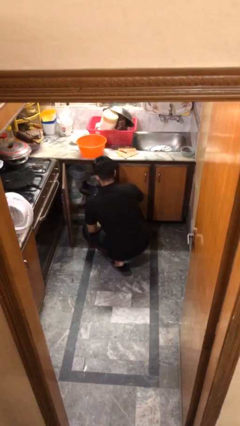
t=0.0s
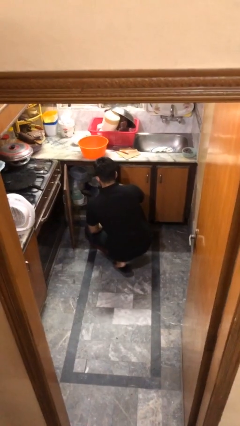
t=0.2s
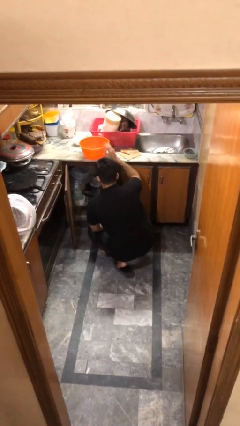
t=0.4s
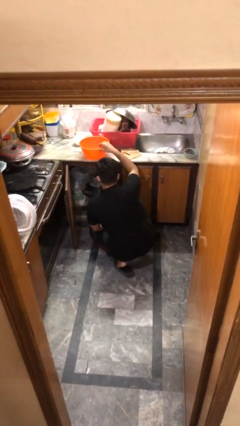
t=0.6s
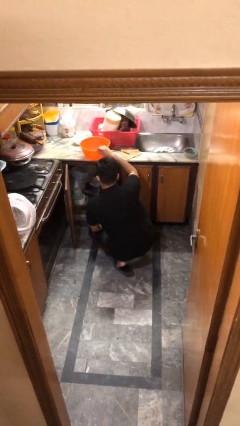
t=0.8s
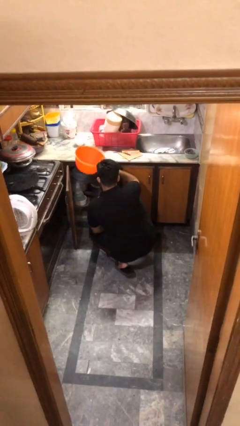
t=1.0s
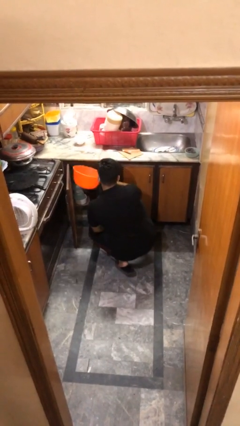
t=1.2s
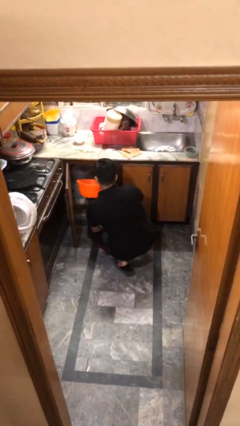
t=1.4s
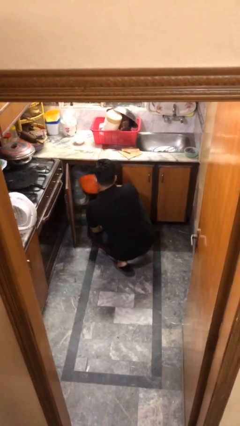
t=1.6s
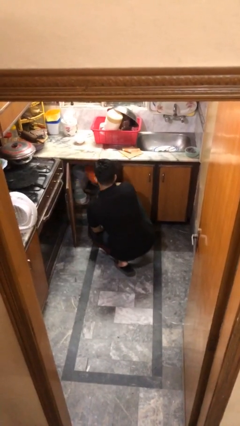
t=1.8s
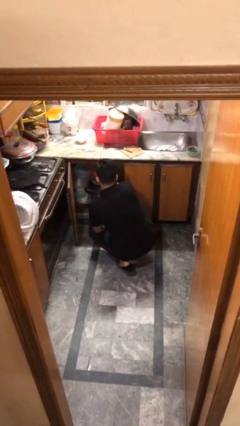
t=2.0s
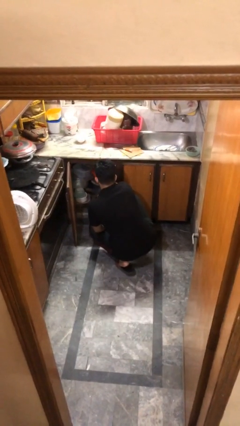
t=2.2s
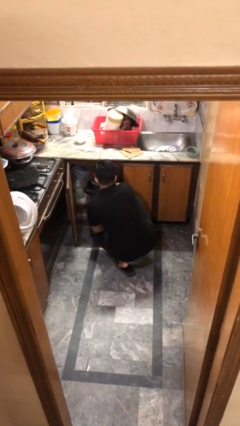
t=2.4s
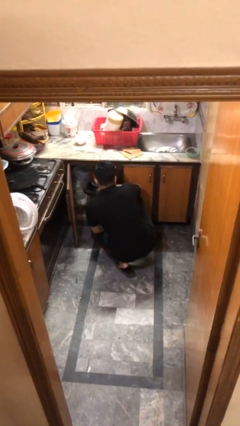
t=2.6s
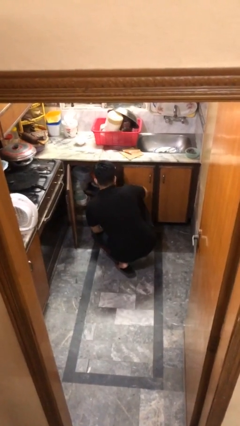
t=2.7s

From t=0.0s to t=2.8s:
person puts object into kitchen drawer

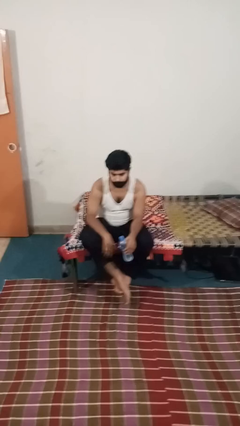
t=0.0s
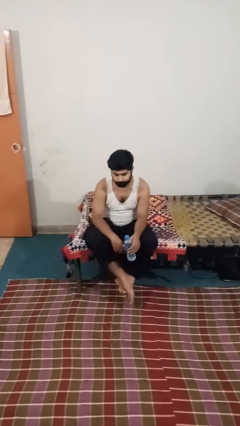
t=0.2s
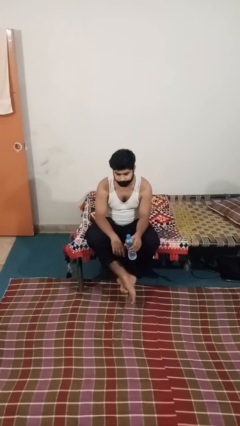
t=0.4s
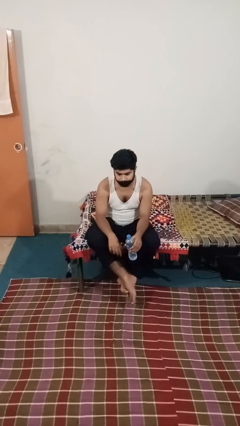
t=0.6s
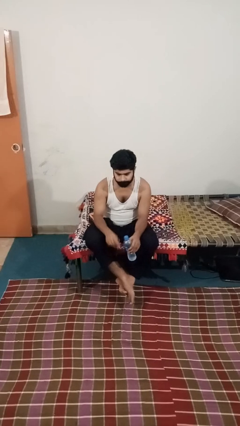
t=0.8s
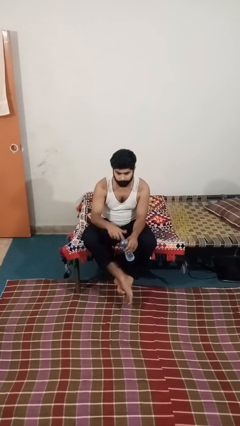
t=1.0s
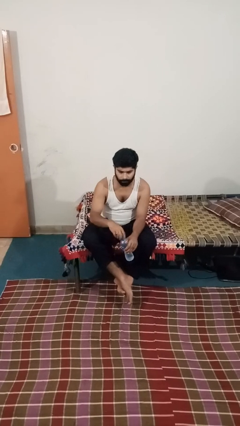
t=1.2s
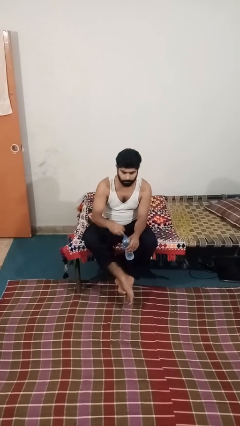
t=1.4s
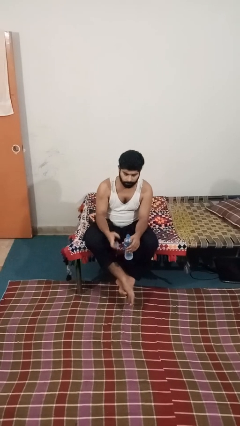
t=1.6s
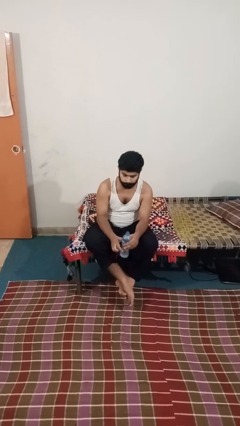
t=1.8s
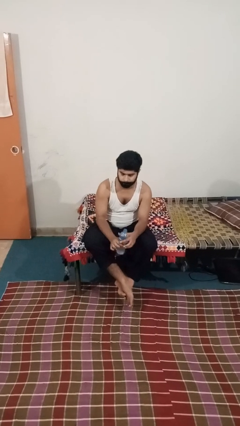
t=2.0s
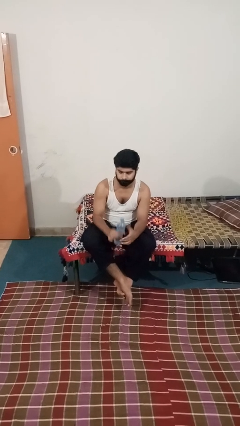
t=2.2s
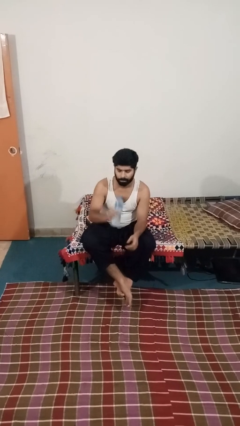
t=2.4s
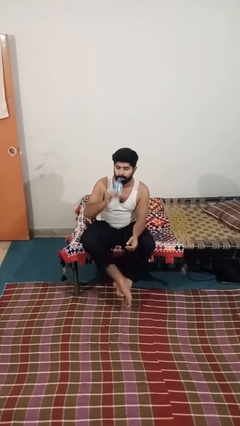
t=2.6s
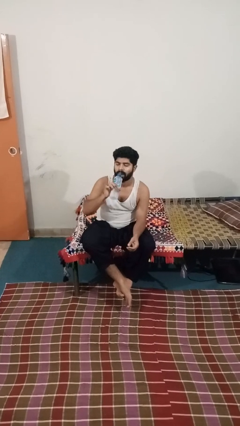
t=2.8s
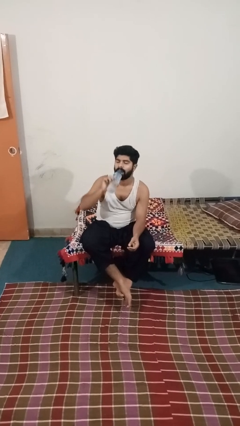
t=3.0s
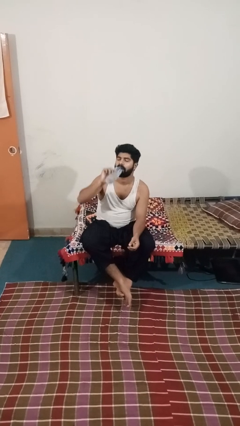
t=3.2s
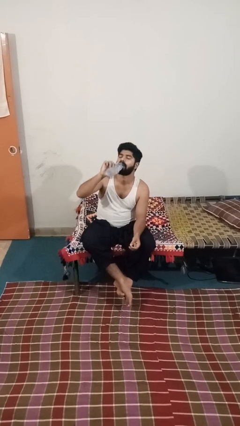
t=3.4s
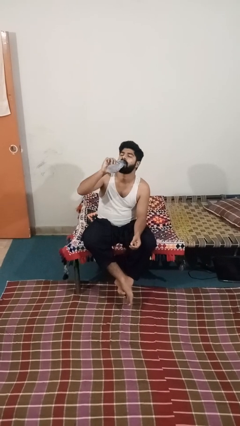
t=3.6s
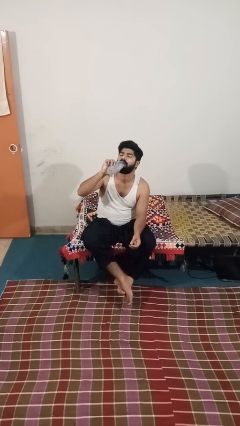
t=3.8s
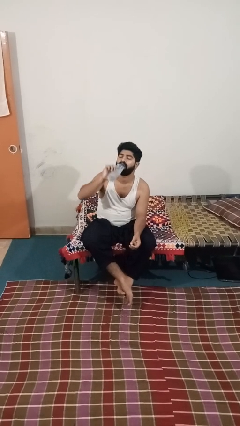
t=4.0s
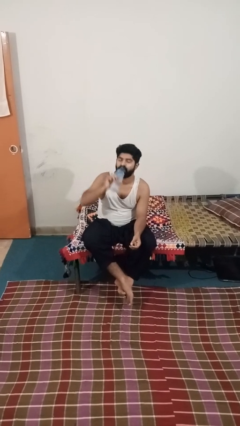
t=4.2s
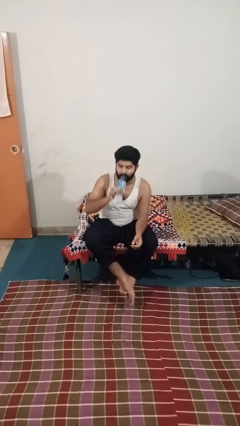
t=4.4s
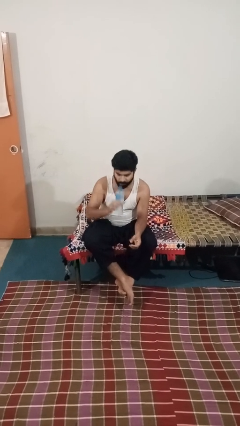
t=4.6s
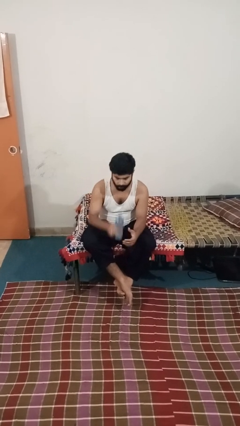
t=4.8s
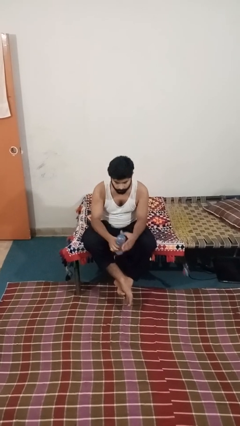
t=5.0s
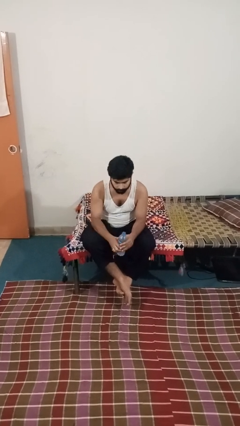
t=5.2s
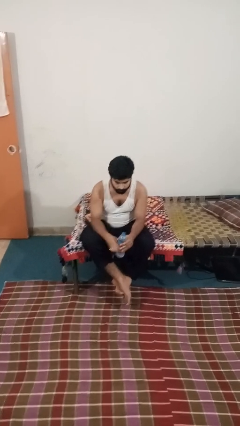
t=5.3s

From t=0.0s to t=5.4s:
person drinks from bottle

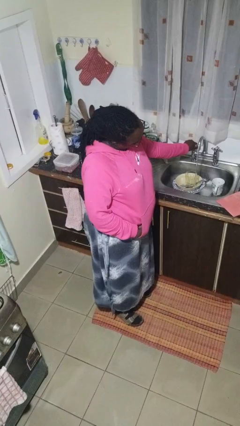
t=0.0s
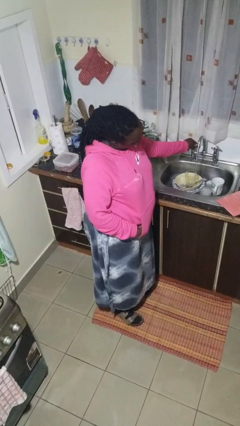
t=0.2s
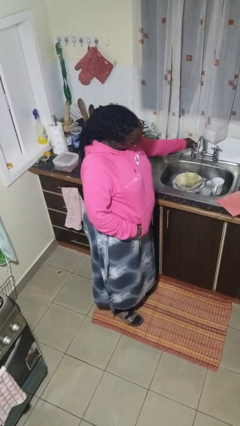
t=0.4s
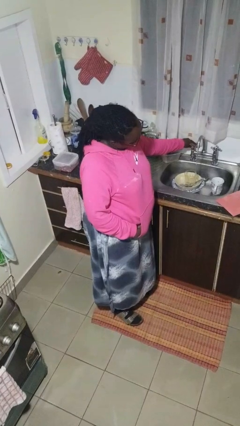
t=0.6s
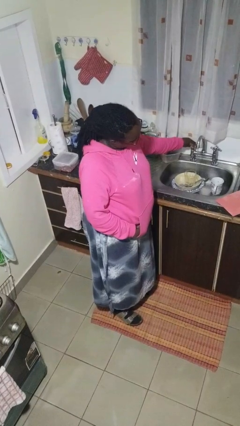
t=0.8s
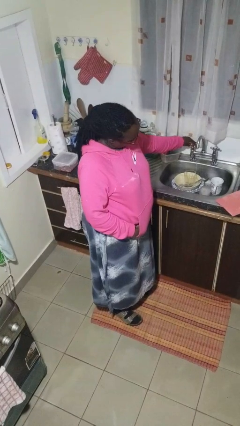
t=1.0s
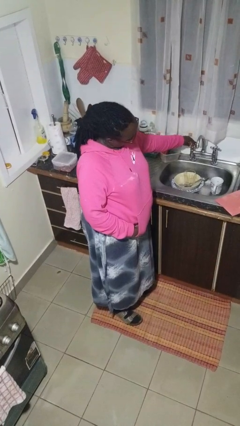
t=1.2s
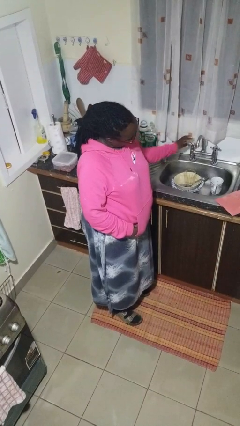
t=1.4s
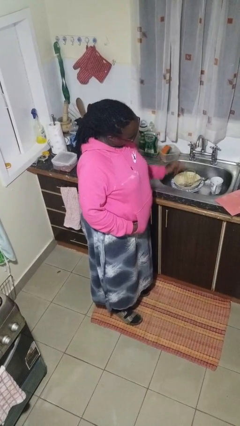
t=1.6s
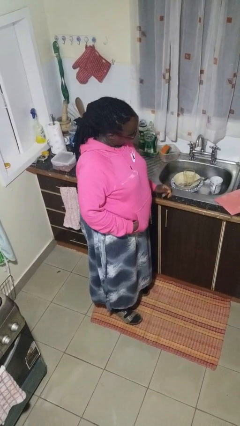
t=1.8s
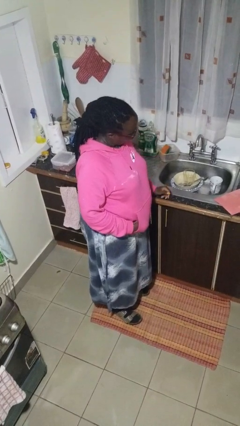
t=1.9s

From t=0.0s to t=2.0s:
person turns off faucet

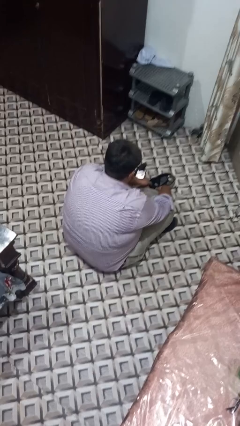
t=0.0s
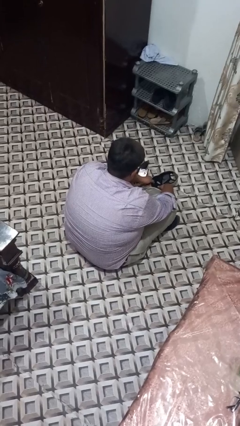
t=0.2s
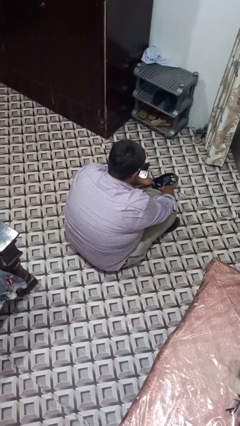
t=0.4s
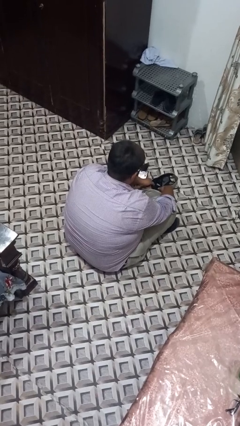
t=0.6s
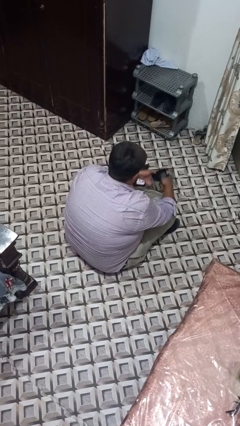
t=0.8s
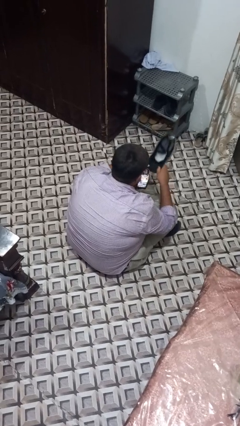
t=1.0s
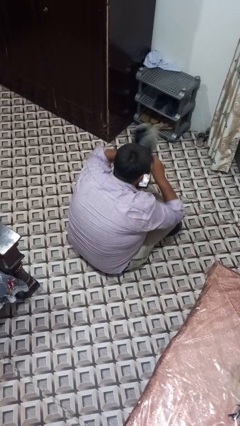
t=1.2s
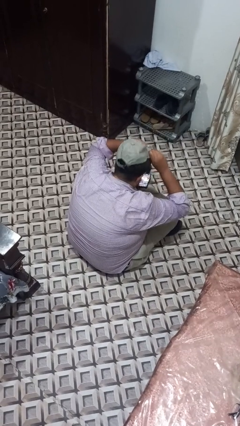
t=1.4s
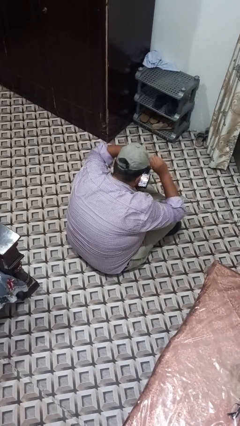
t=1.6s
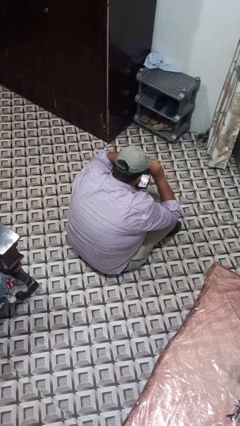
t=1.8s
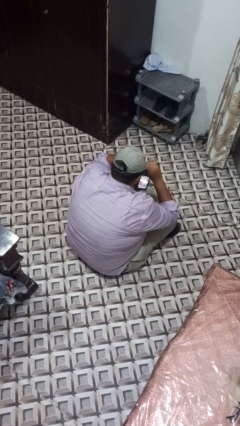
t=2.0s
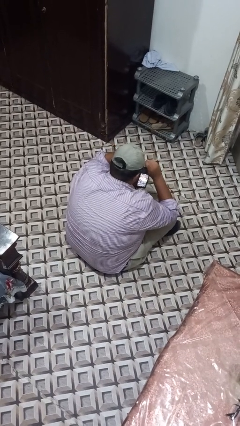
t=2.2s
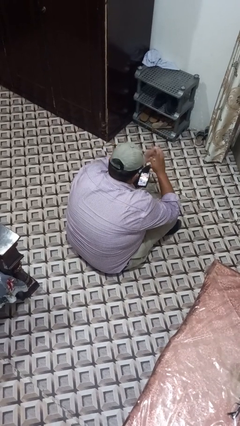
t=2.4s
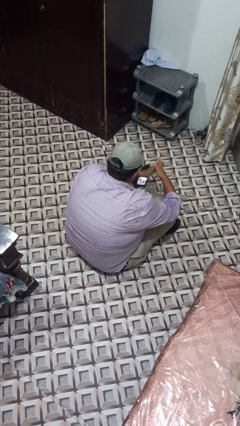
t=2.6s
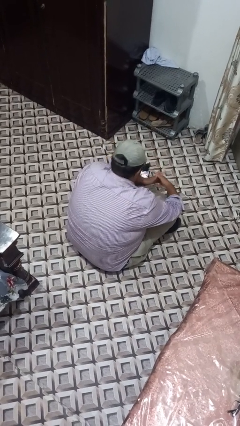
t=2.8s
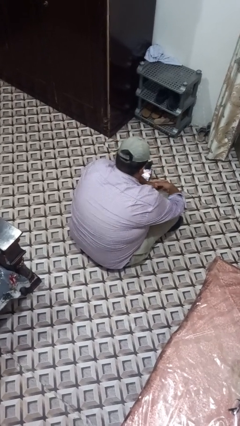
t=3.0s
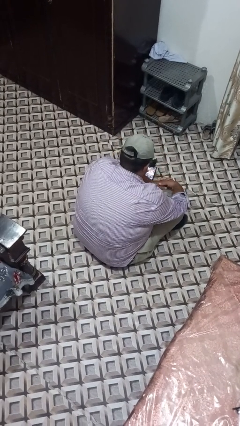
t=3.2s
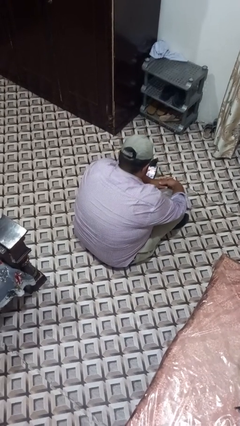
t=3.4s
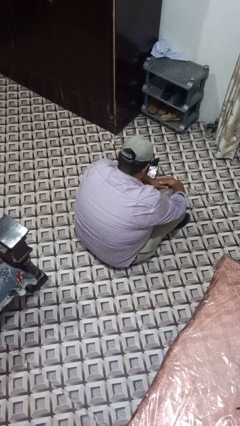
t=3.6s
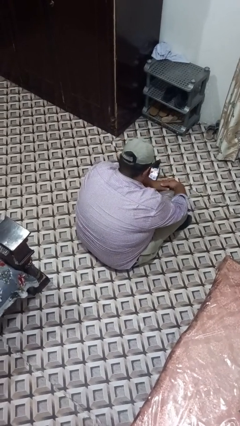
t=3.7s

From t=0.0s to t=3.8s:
person puts on hat

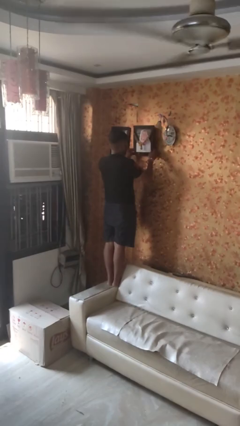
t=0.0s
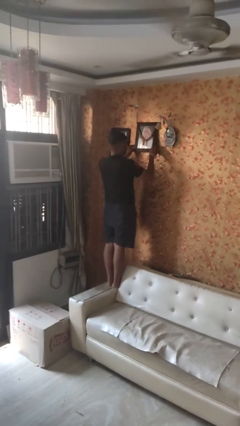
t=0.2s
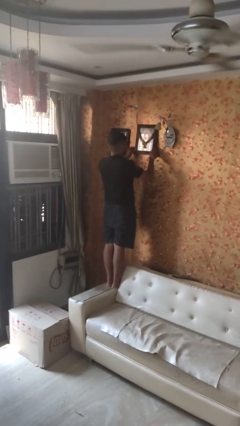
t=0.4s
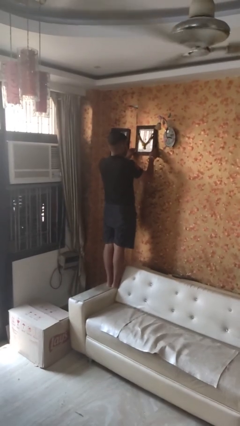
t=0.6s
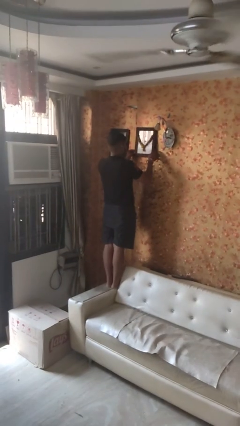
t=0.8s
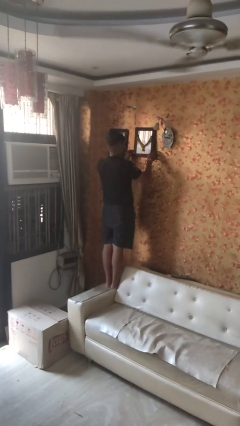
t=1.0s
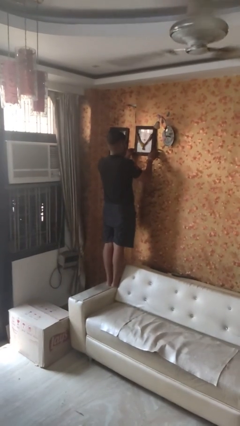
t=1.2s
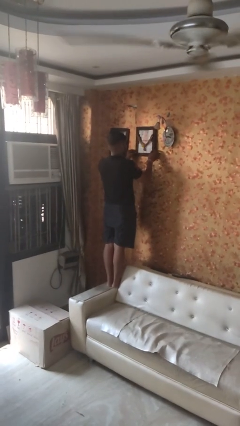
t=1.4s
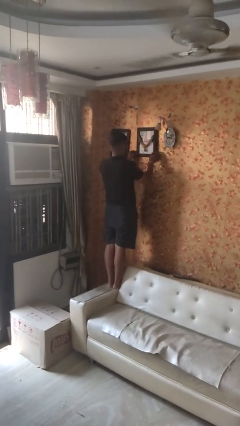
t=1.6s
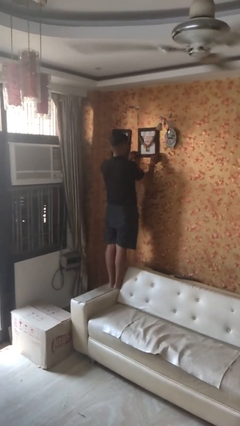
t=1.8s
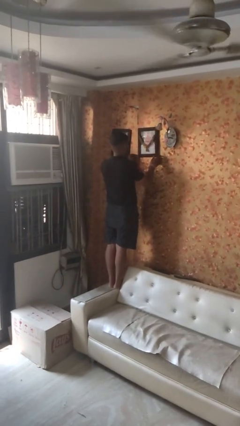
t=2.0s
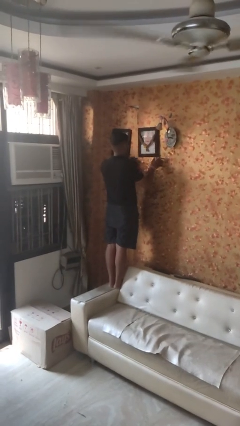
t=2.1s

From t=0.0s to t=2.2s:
person puts up picture frame

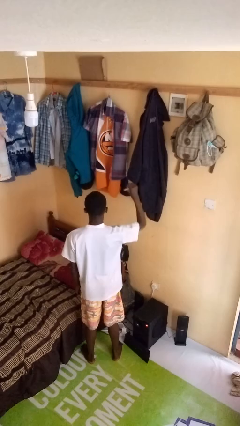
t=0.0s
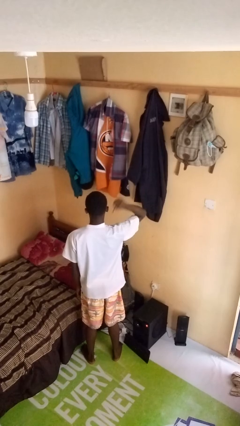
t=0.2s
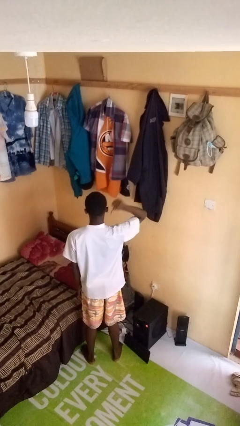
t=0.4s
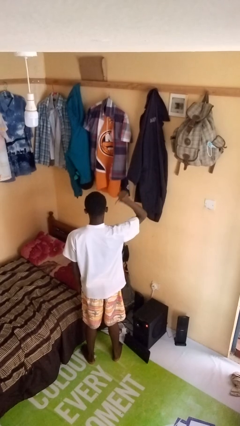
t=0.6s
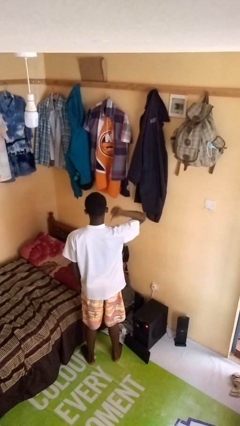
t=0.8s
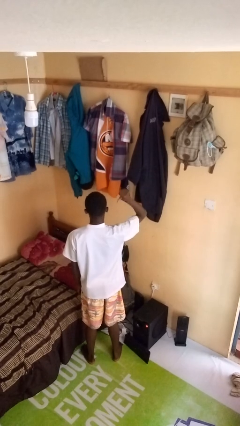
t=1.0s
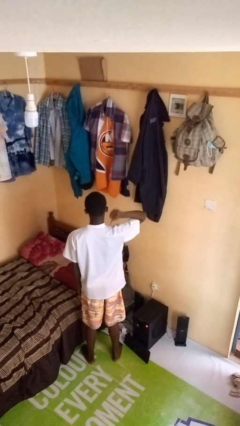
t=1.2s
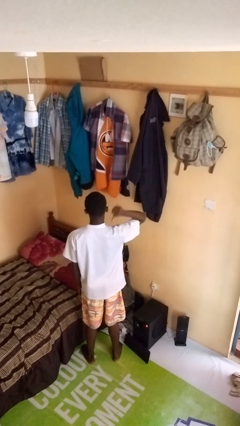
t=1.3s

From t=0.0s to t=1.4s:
person gestures behind me

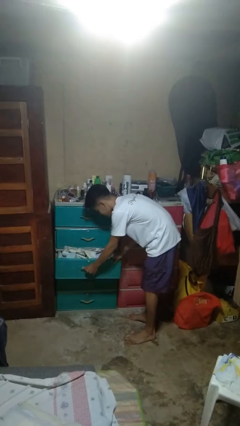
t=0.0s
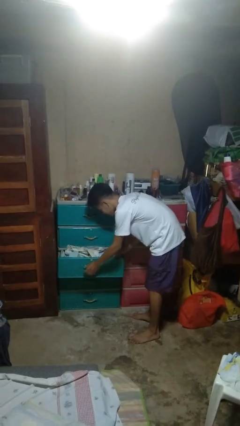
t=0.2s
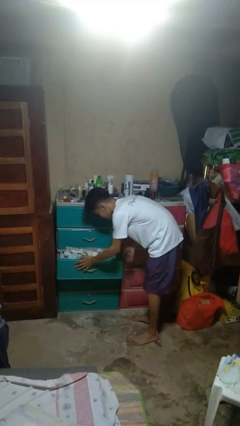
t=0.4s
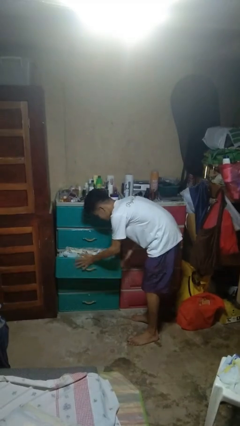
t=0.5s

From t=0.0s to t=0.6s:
person closes dresser drawer
